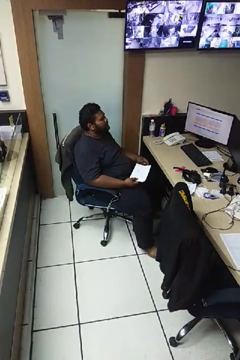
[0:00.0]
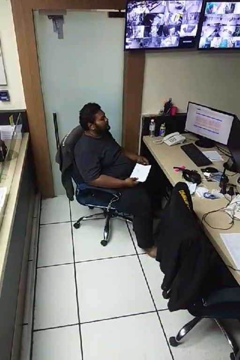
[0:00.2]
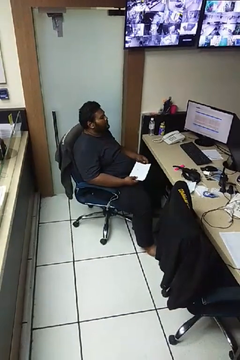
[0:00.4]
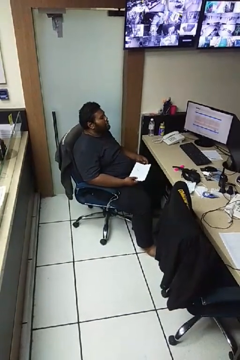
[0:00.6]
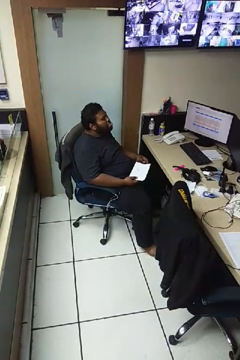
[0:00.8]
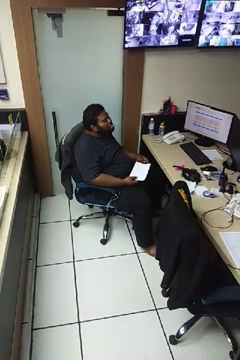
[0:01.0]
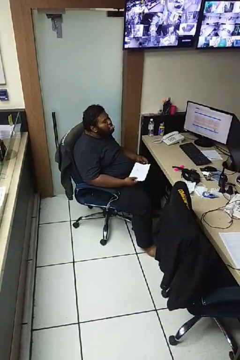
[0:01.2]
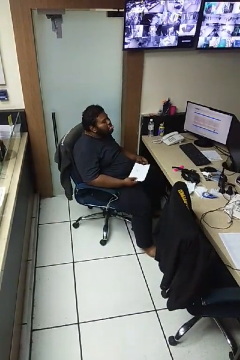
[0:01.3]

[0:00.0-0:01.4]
person sticks out tongue

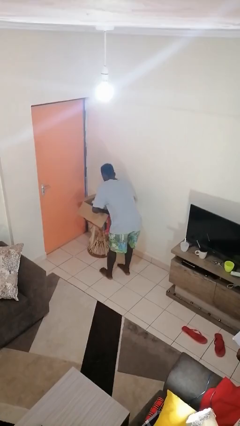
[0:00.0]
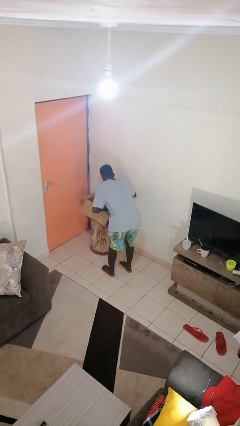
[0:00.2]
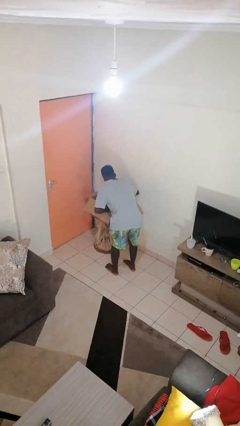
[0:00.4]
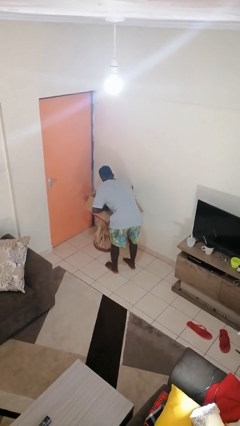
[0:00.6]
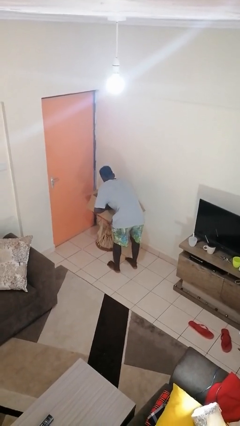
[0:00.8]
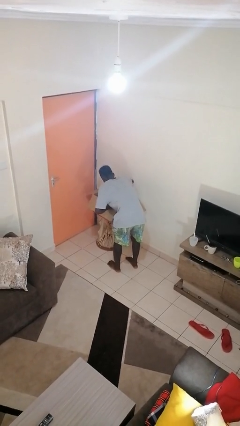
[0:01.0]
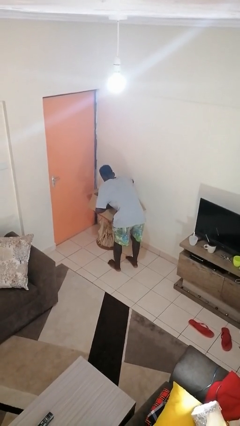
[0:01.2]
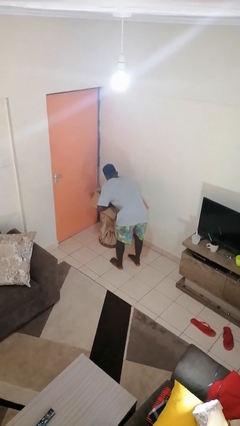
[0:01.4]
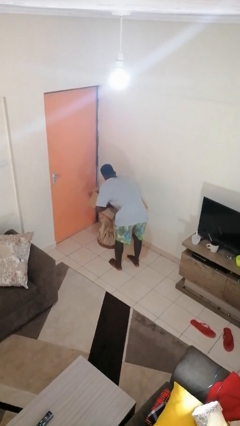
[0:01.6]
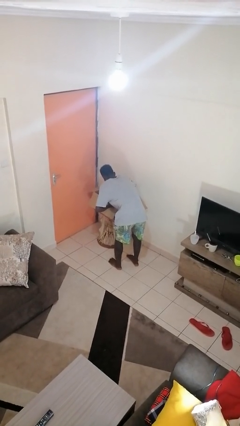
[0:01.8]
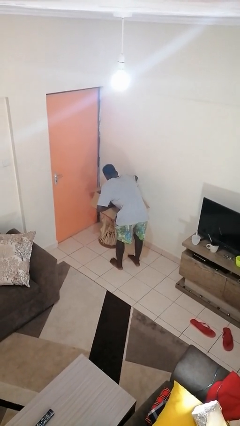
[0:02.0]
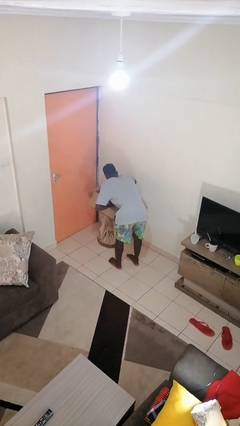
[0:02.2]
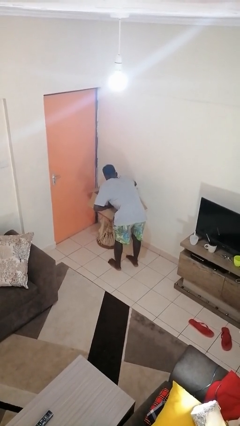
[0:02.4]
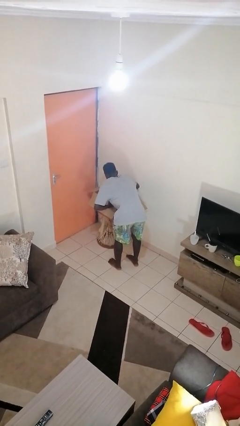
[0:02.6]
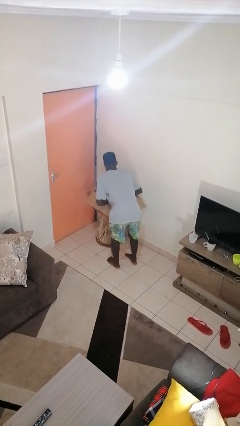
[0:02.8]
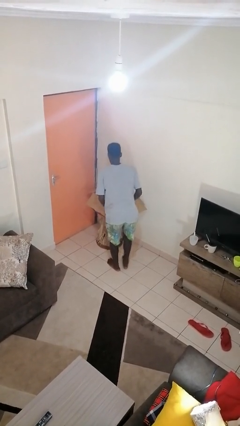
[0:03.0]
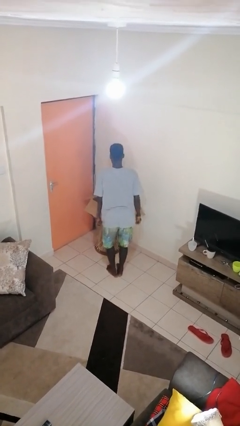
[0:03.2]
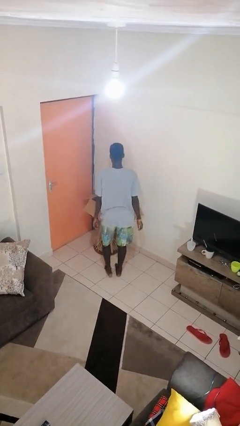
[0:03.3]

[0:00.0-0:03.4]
person searches in box

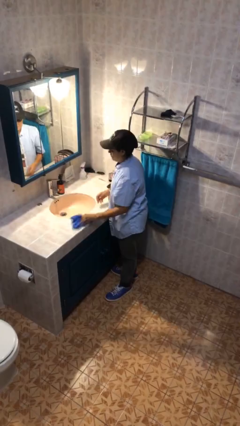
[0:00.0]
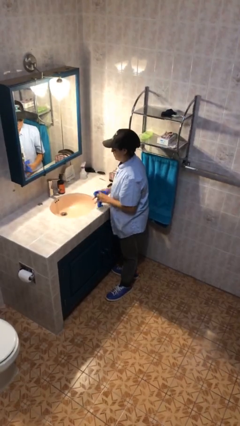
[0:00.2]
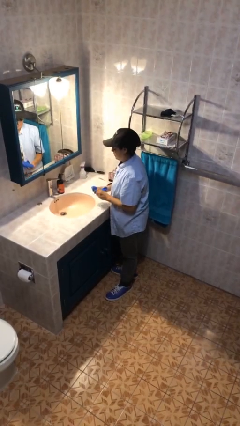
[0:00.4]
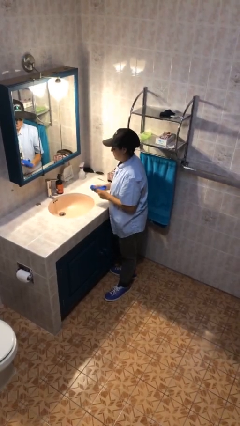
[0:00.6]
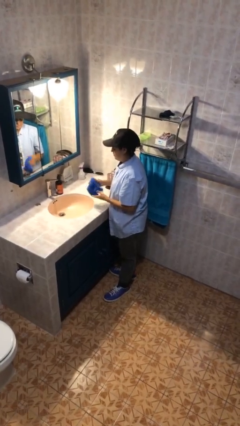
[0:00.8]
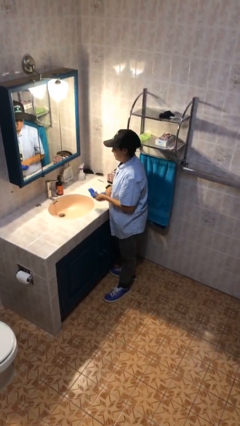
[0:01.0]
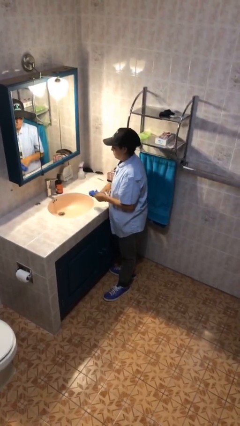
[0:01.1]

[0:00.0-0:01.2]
person dries hands with towel

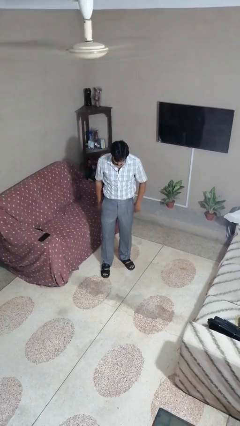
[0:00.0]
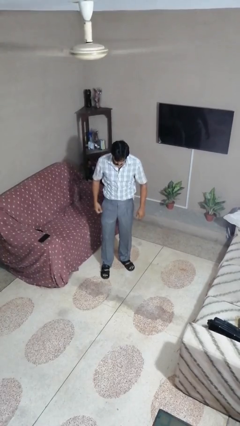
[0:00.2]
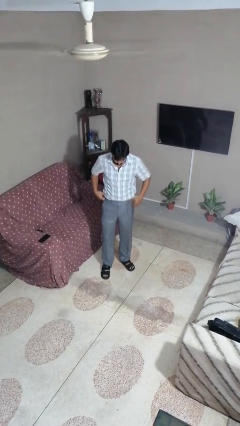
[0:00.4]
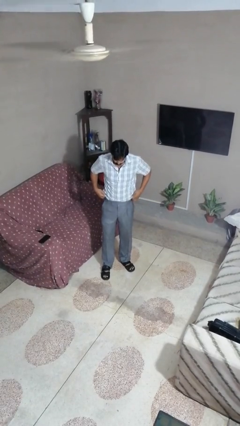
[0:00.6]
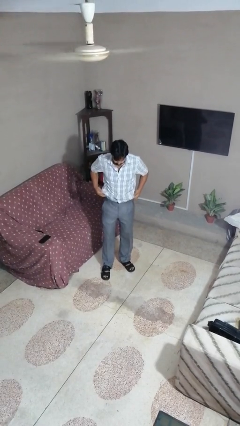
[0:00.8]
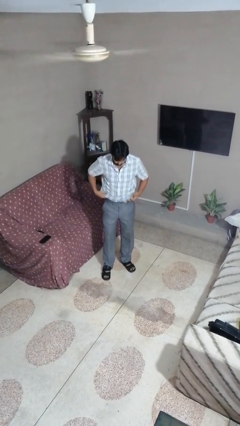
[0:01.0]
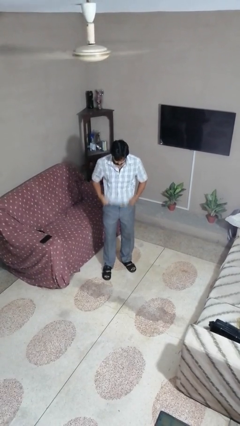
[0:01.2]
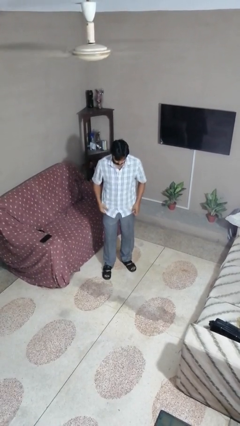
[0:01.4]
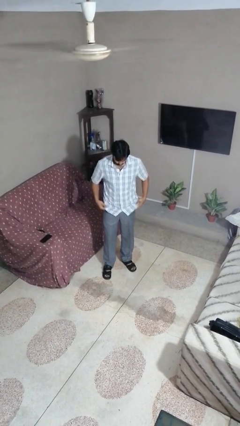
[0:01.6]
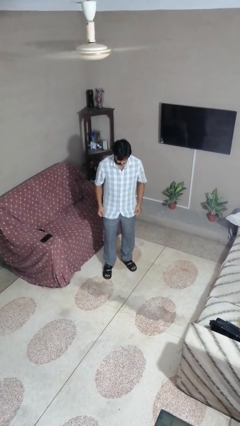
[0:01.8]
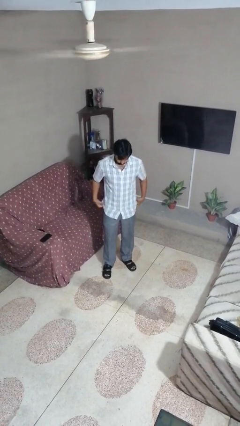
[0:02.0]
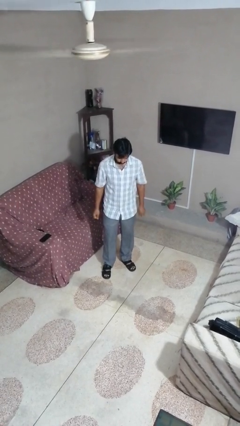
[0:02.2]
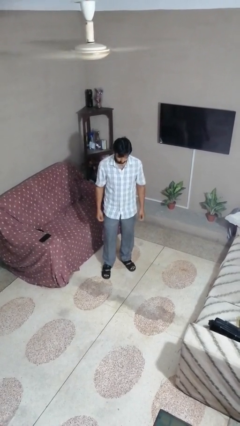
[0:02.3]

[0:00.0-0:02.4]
person untucks shirt

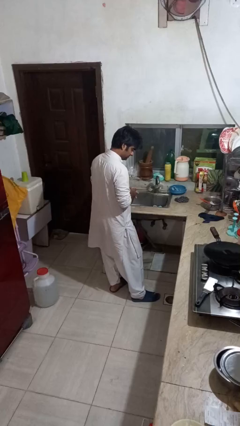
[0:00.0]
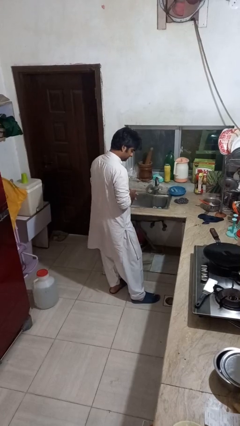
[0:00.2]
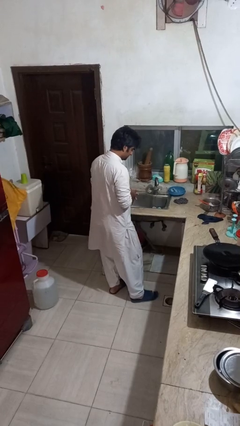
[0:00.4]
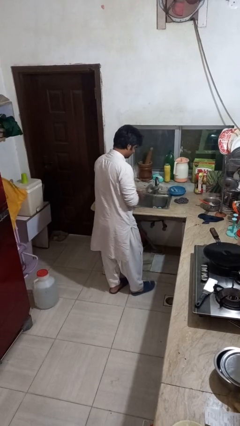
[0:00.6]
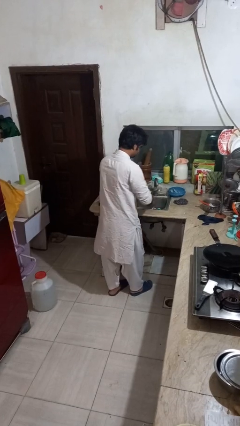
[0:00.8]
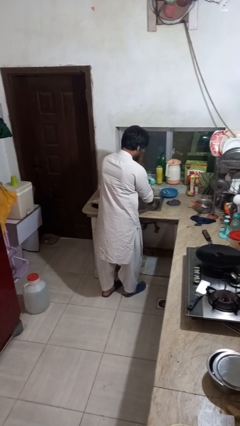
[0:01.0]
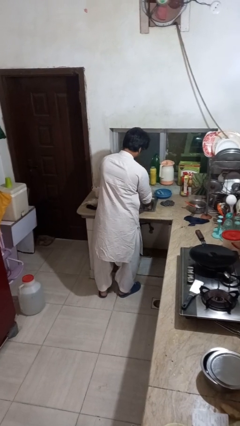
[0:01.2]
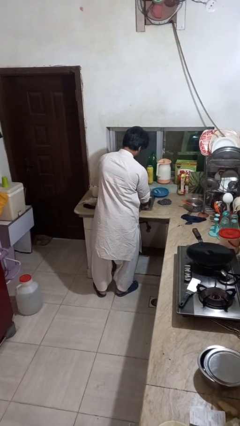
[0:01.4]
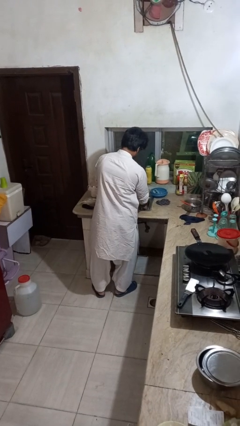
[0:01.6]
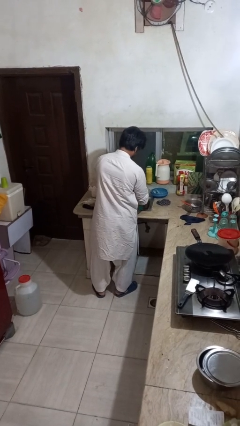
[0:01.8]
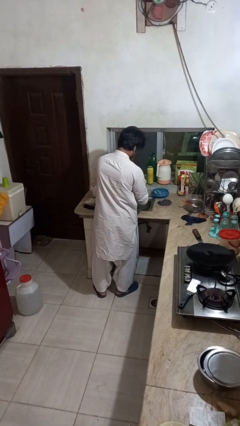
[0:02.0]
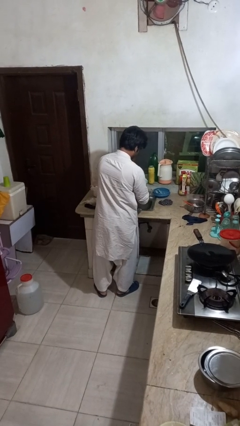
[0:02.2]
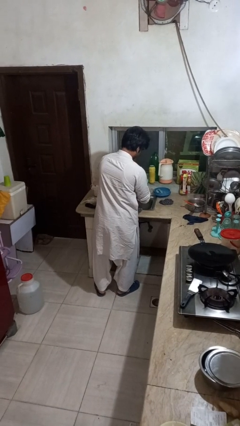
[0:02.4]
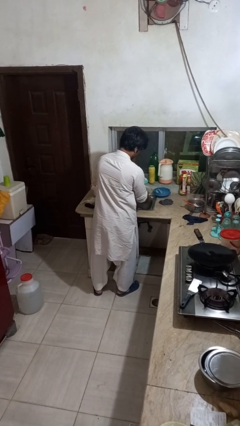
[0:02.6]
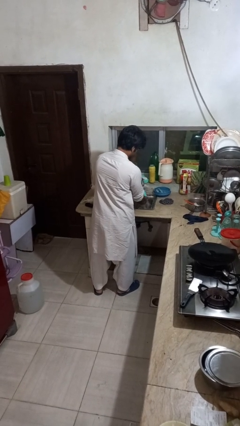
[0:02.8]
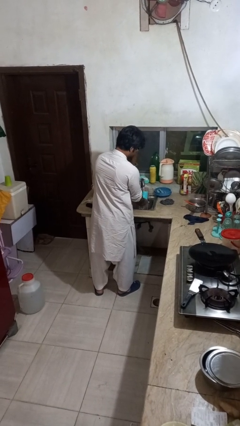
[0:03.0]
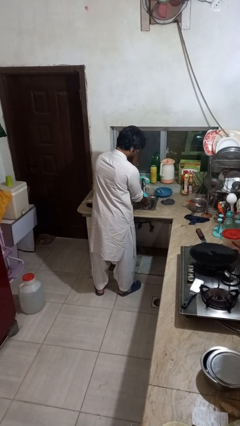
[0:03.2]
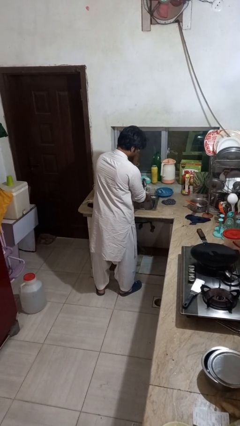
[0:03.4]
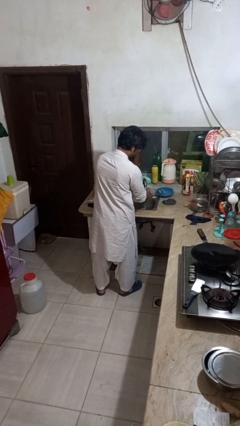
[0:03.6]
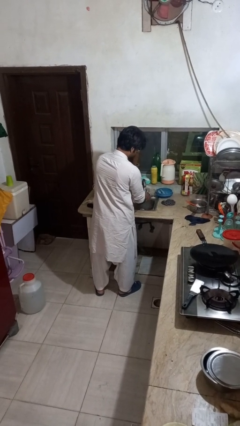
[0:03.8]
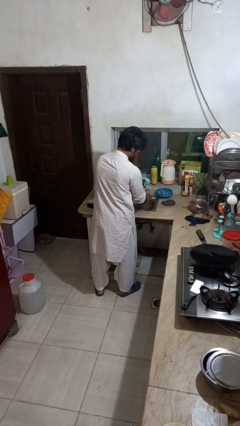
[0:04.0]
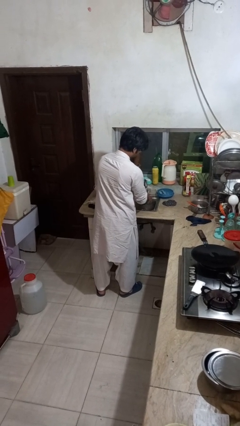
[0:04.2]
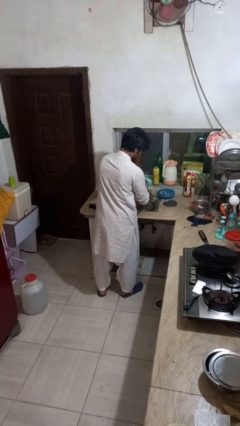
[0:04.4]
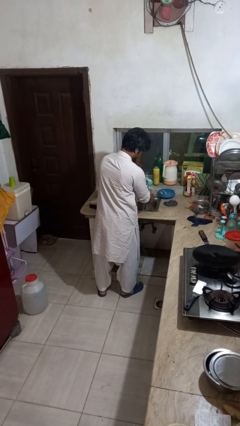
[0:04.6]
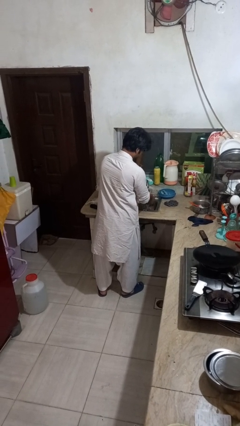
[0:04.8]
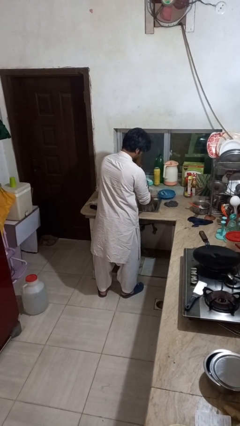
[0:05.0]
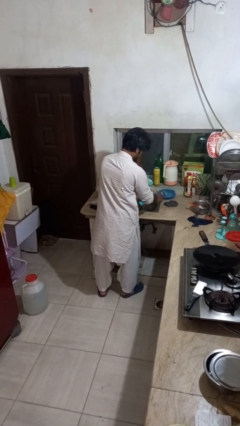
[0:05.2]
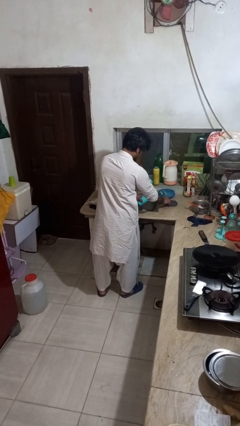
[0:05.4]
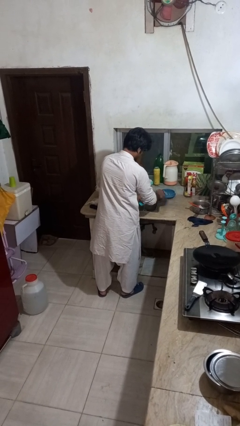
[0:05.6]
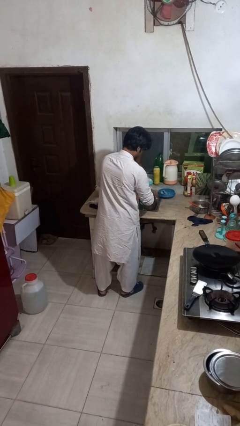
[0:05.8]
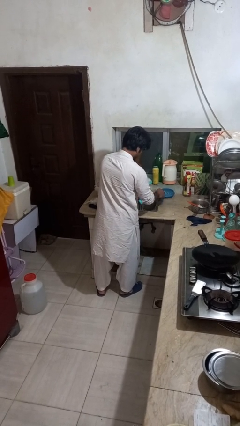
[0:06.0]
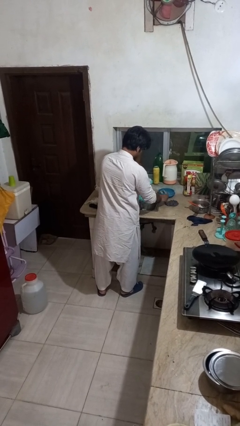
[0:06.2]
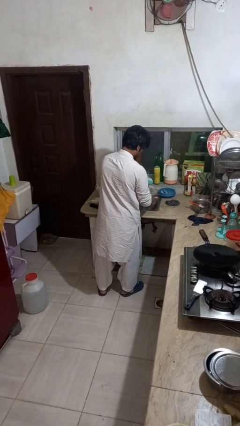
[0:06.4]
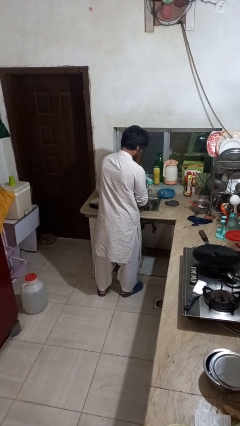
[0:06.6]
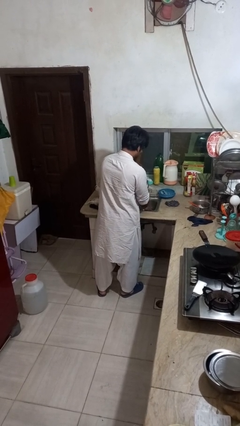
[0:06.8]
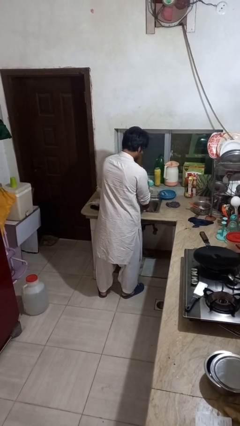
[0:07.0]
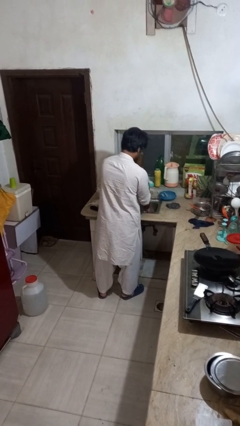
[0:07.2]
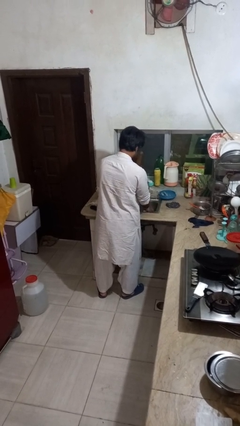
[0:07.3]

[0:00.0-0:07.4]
person washes dish

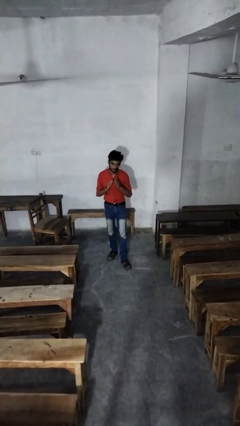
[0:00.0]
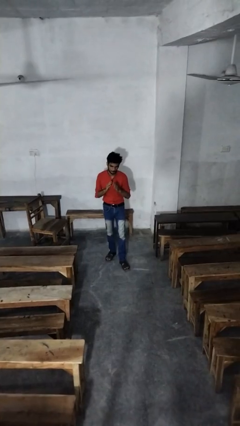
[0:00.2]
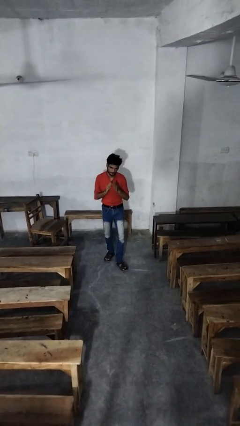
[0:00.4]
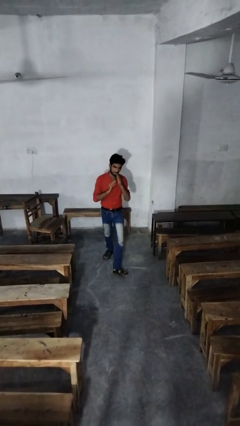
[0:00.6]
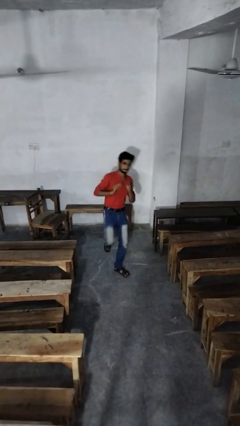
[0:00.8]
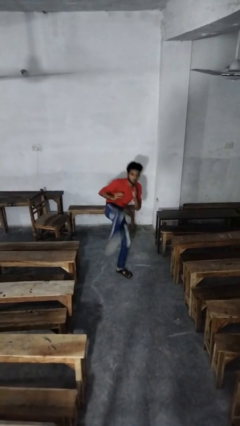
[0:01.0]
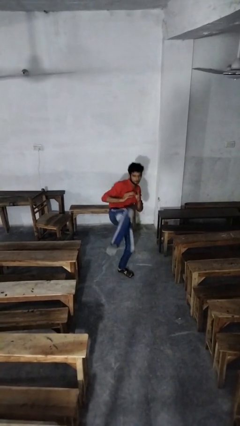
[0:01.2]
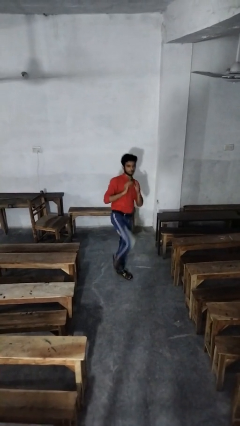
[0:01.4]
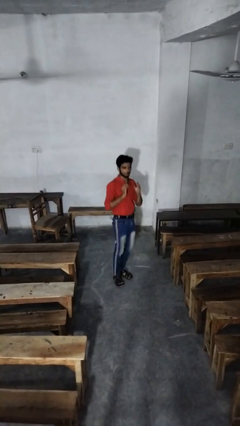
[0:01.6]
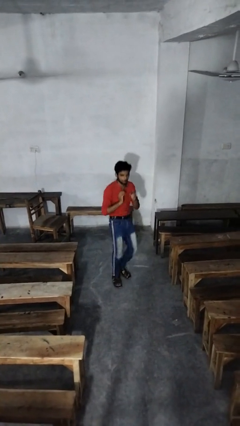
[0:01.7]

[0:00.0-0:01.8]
person karate kicks
